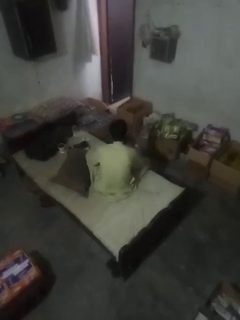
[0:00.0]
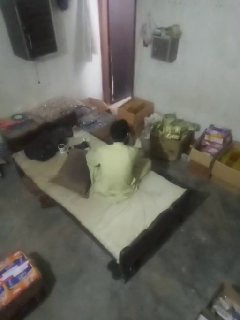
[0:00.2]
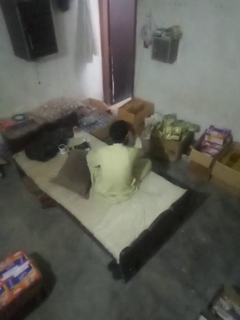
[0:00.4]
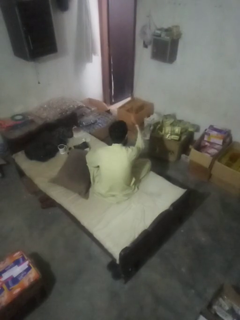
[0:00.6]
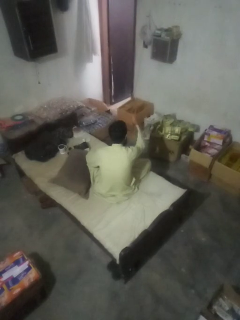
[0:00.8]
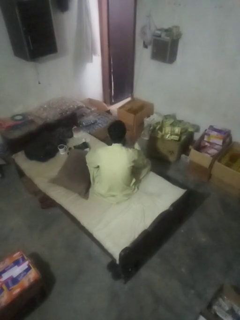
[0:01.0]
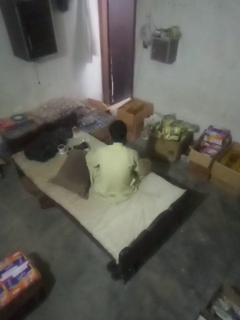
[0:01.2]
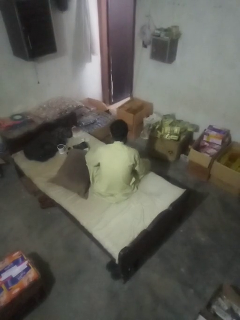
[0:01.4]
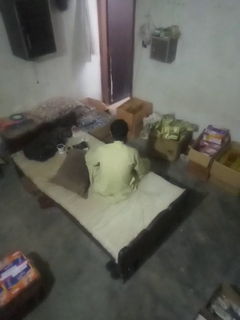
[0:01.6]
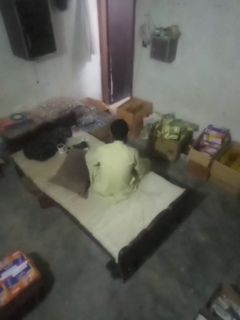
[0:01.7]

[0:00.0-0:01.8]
person gestures watch closely

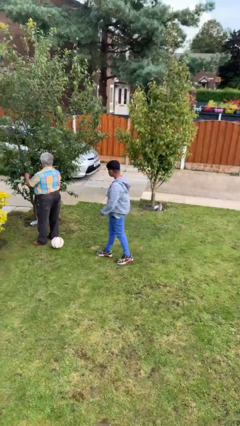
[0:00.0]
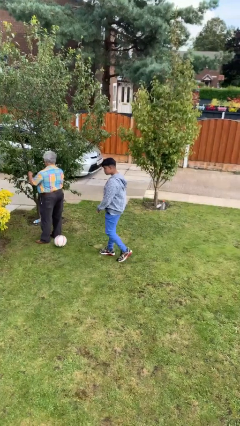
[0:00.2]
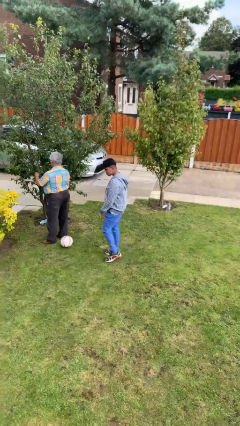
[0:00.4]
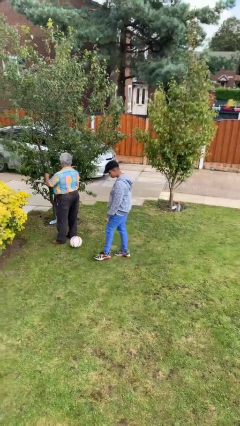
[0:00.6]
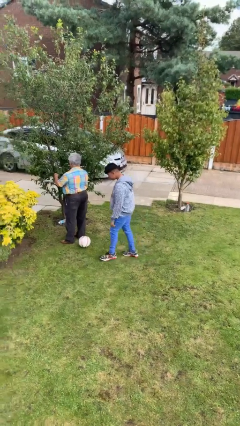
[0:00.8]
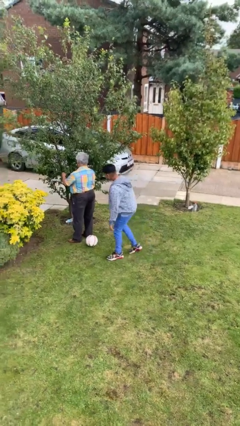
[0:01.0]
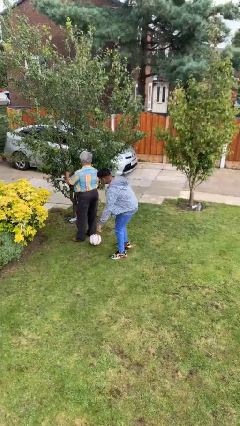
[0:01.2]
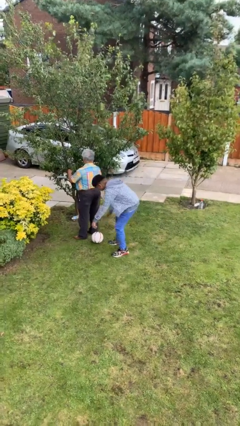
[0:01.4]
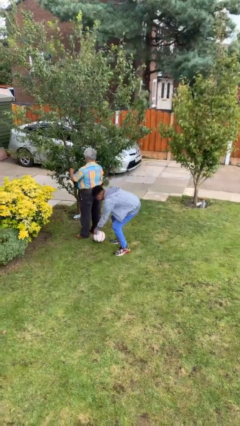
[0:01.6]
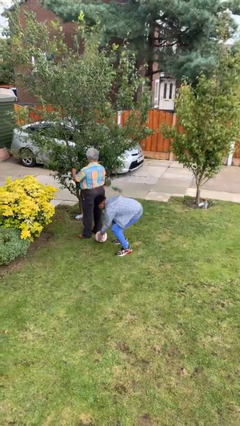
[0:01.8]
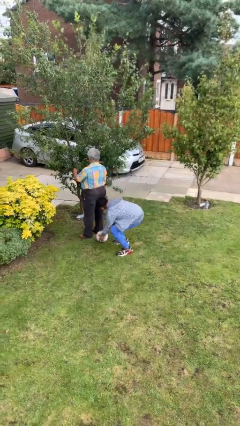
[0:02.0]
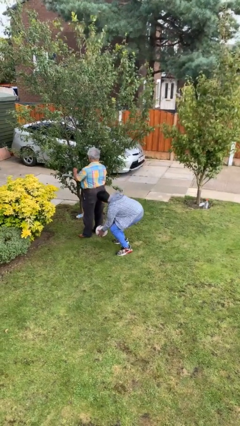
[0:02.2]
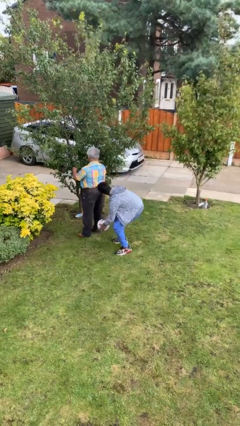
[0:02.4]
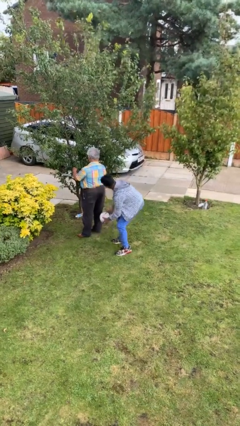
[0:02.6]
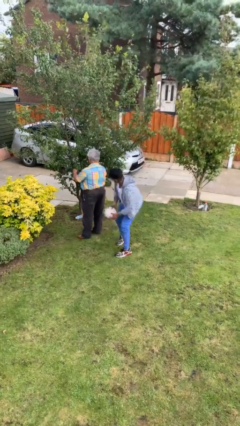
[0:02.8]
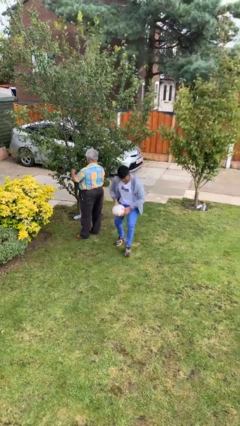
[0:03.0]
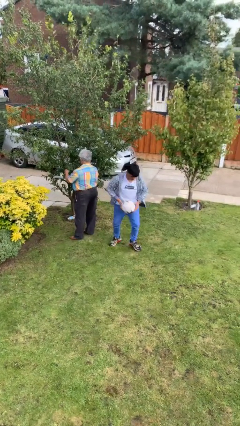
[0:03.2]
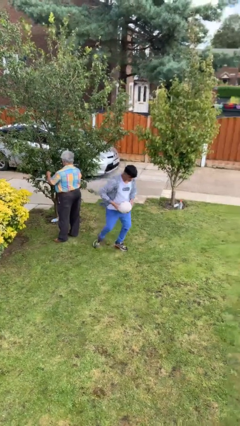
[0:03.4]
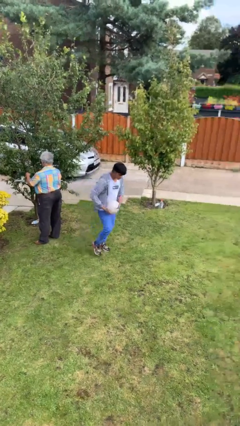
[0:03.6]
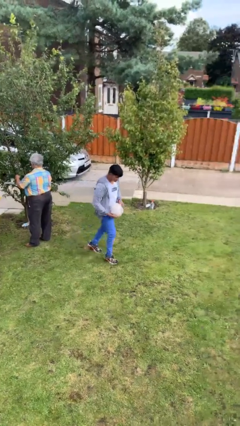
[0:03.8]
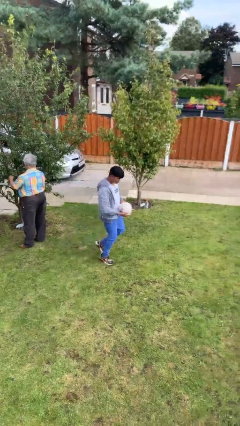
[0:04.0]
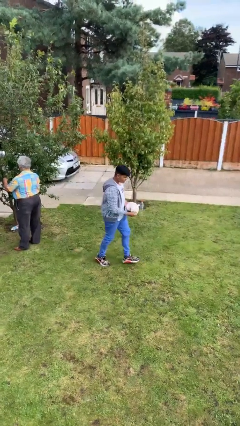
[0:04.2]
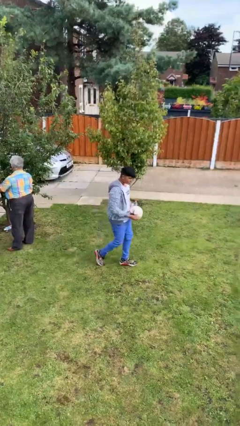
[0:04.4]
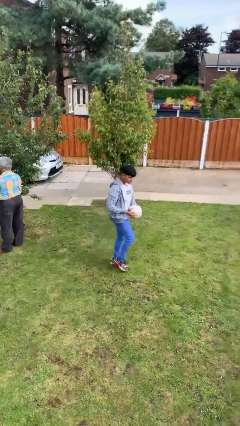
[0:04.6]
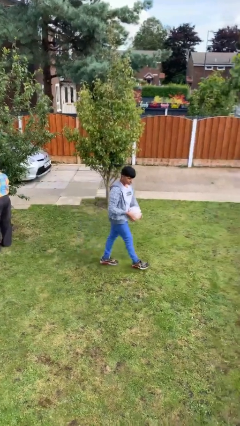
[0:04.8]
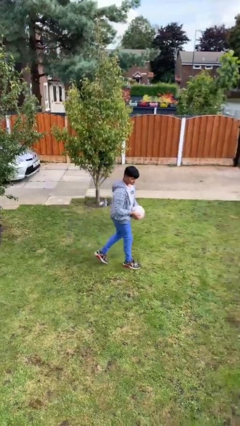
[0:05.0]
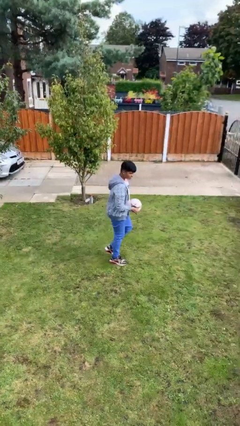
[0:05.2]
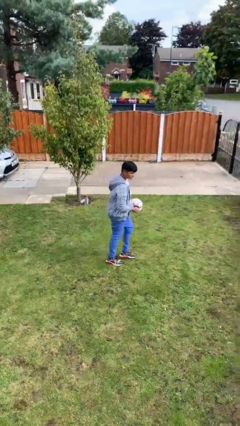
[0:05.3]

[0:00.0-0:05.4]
person steals object from person

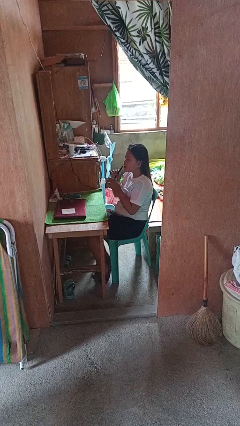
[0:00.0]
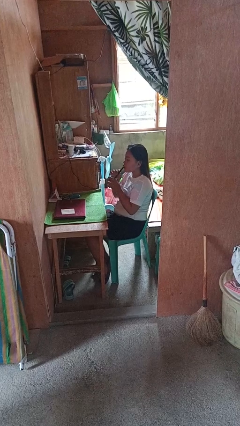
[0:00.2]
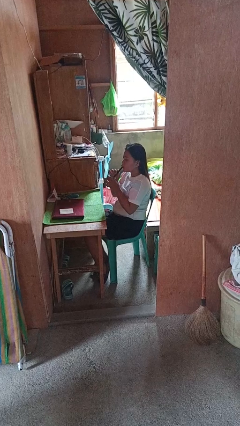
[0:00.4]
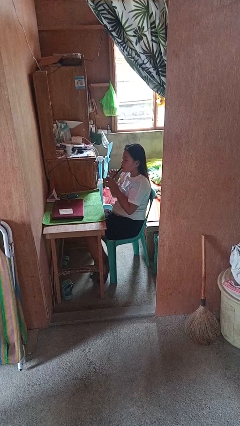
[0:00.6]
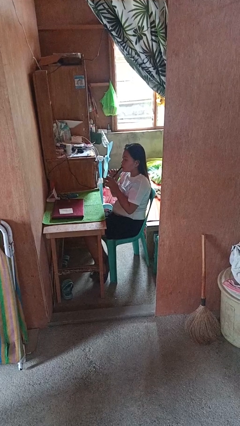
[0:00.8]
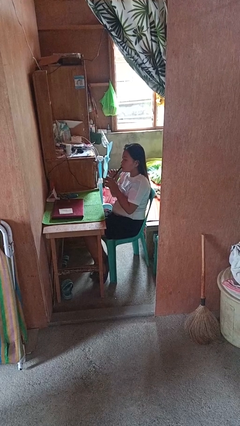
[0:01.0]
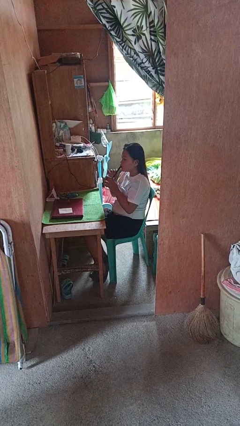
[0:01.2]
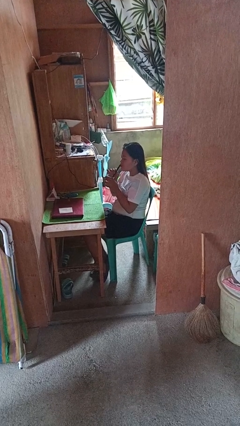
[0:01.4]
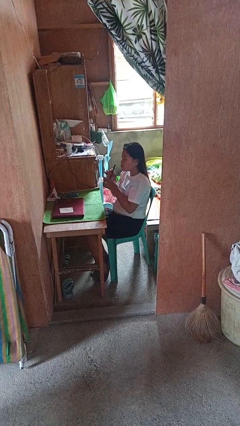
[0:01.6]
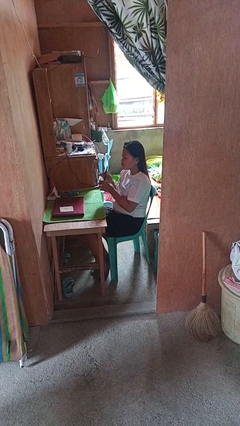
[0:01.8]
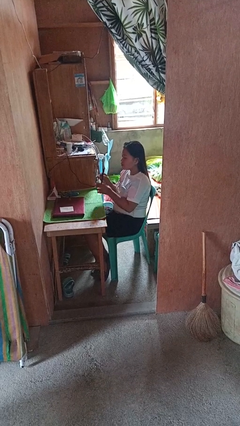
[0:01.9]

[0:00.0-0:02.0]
person drinks from straw

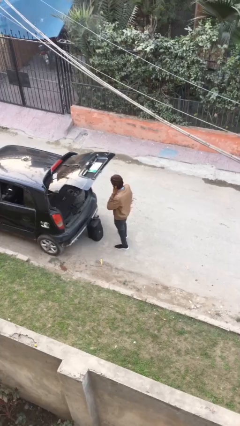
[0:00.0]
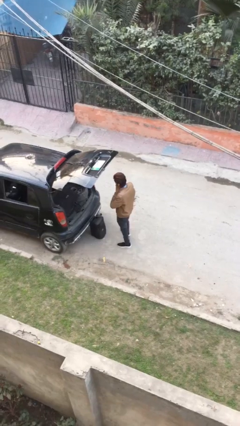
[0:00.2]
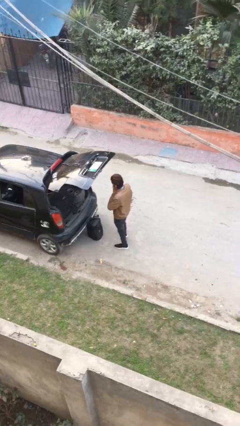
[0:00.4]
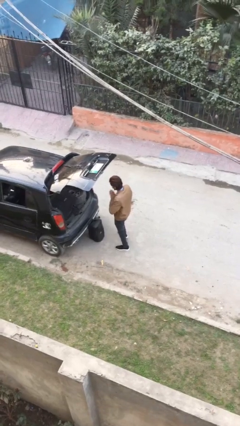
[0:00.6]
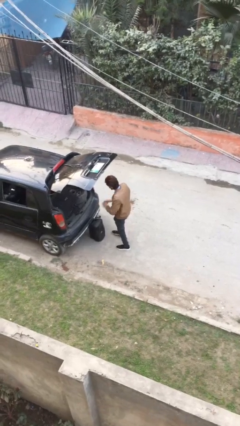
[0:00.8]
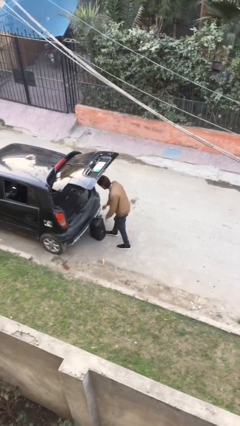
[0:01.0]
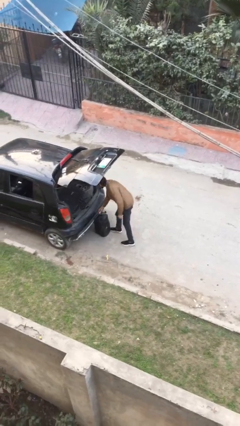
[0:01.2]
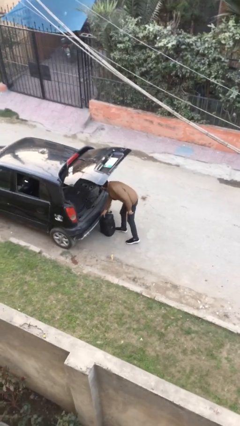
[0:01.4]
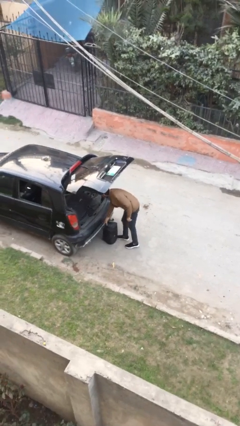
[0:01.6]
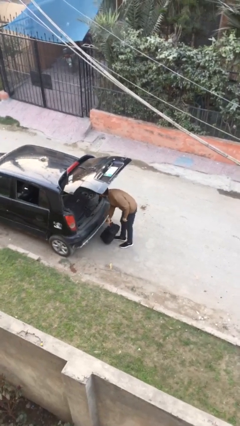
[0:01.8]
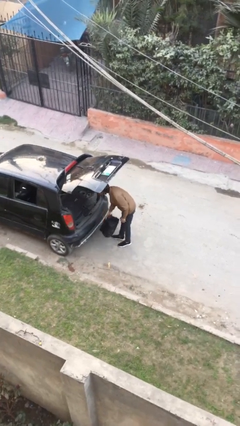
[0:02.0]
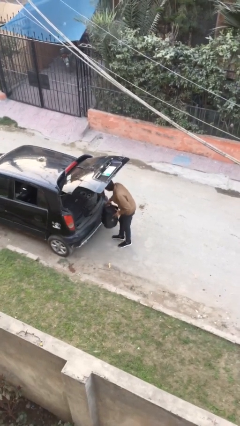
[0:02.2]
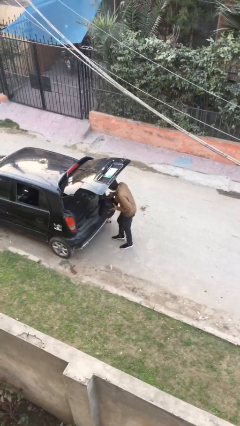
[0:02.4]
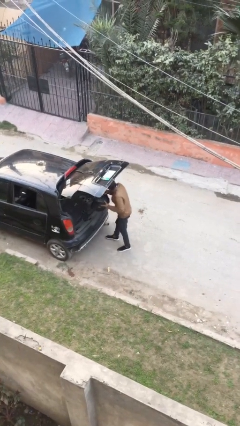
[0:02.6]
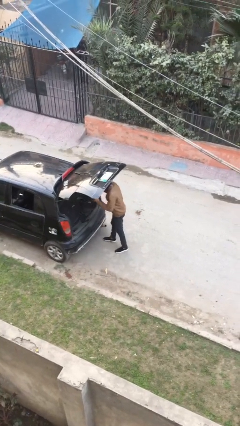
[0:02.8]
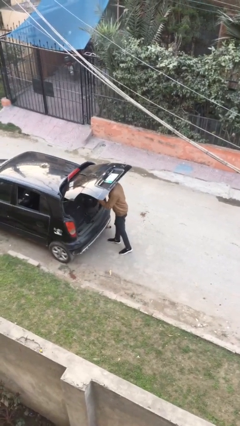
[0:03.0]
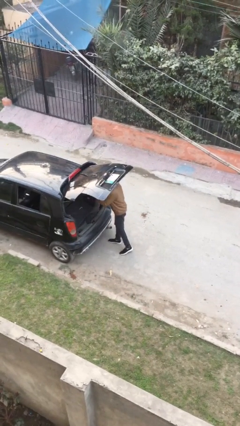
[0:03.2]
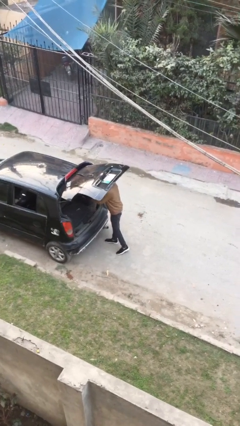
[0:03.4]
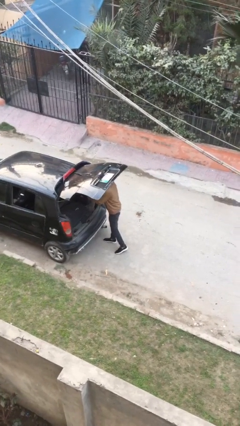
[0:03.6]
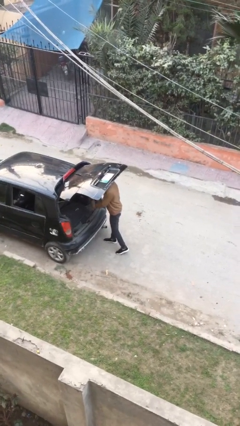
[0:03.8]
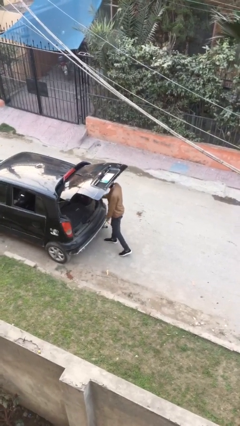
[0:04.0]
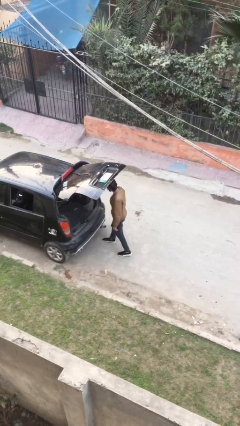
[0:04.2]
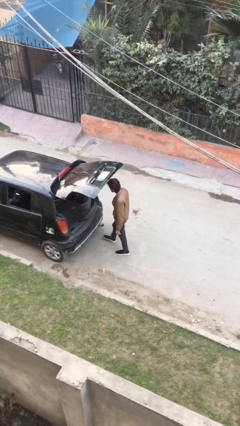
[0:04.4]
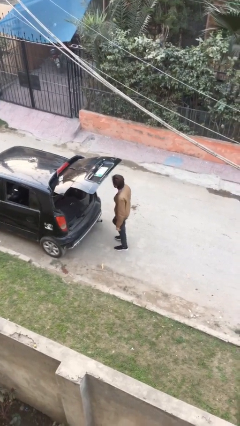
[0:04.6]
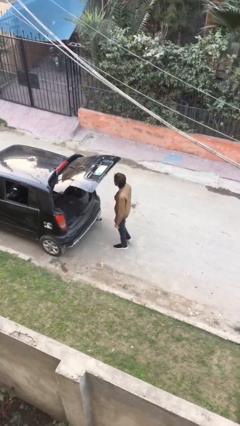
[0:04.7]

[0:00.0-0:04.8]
person loads car

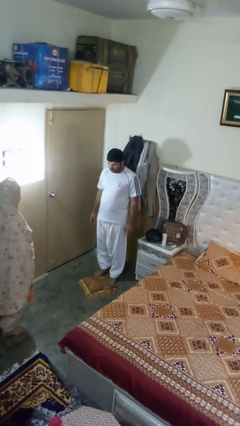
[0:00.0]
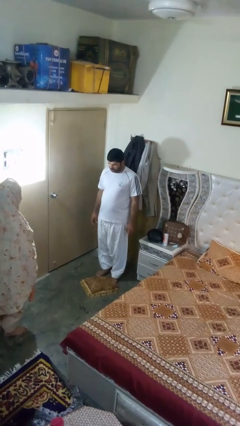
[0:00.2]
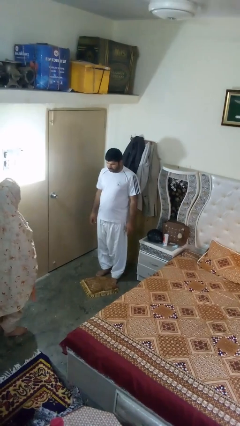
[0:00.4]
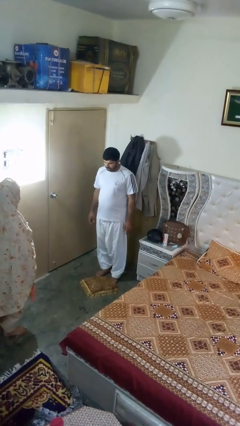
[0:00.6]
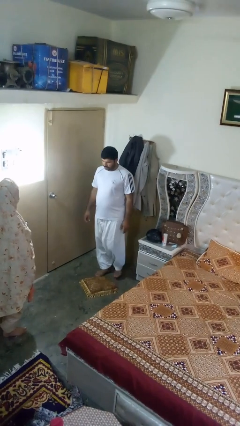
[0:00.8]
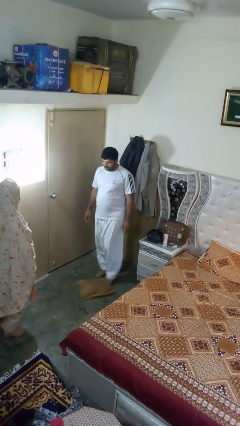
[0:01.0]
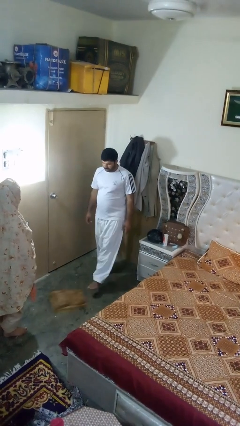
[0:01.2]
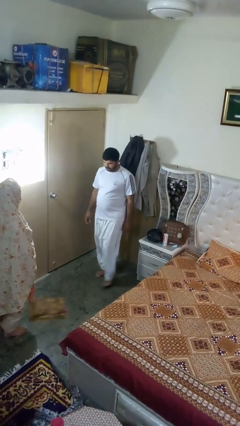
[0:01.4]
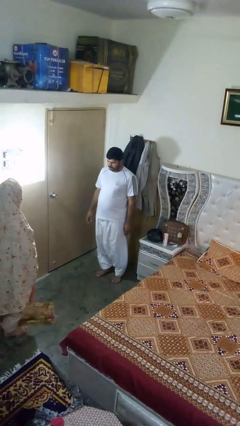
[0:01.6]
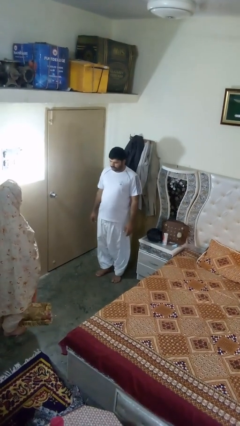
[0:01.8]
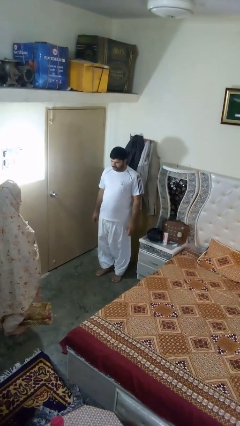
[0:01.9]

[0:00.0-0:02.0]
person kicks object to person

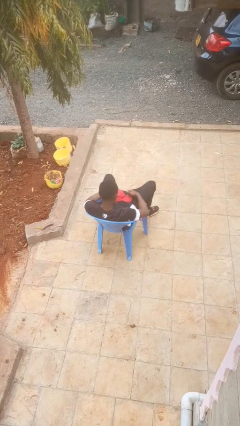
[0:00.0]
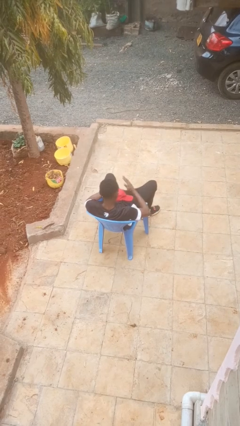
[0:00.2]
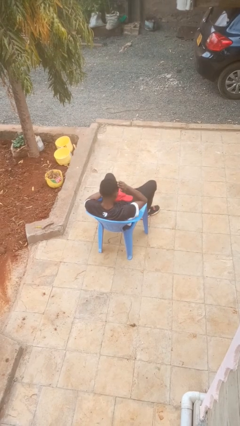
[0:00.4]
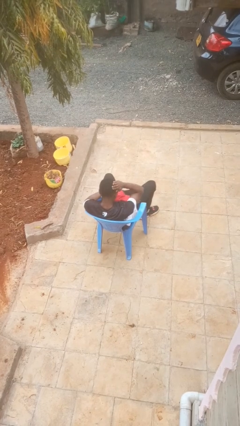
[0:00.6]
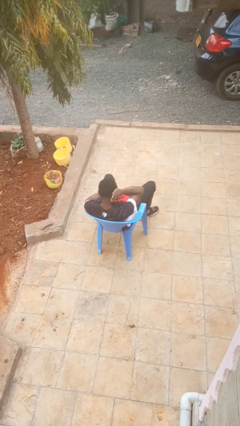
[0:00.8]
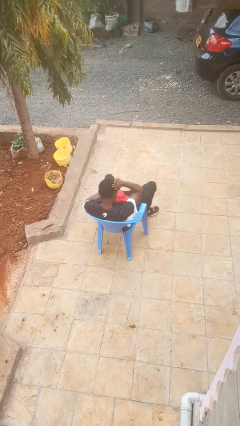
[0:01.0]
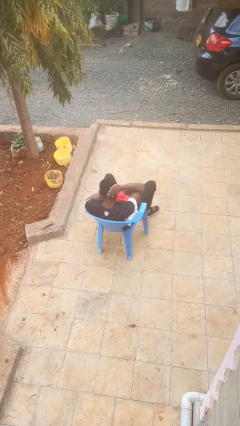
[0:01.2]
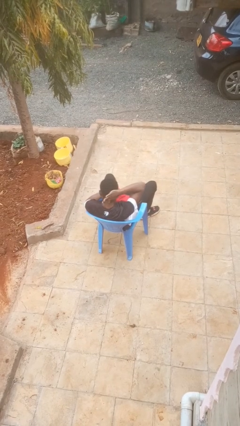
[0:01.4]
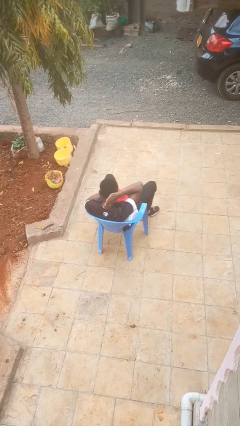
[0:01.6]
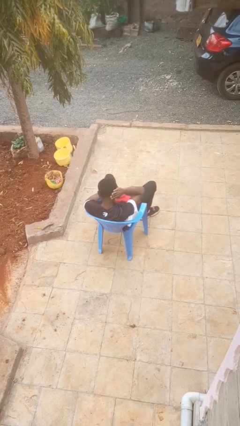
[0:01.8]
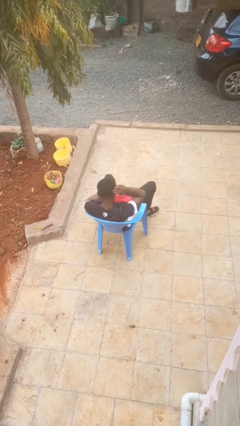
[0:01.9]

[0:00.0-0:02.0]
person strokes hair
